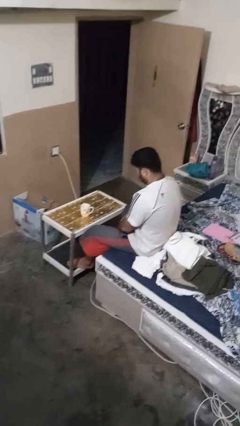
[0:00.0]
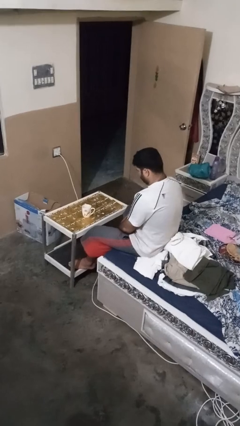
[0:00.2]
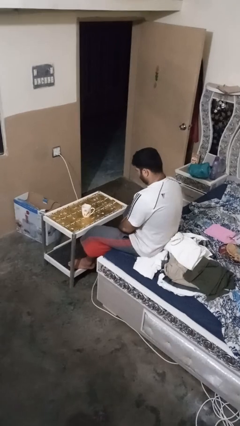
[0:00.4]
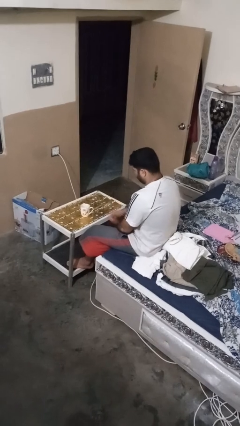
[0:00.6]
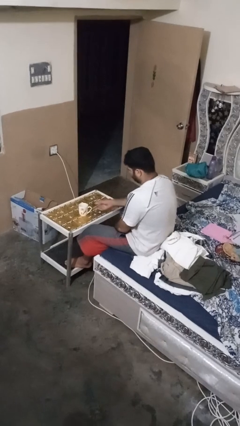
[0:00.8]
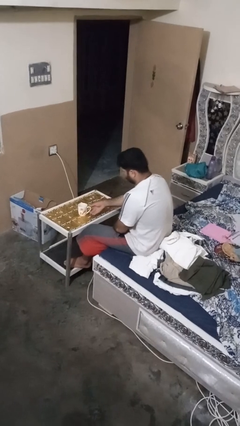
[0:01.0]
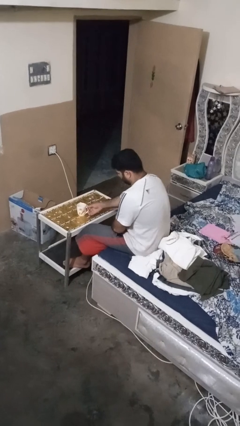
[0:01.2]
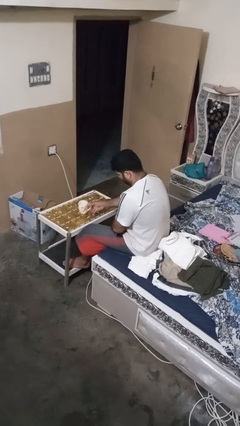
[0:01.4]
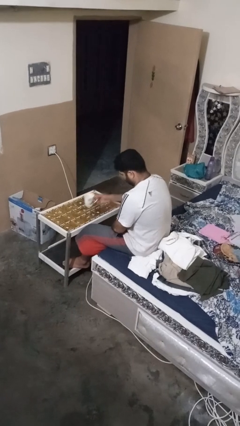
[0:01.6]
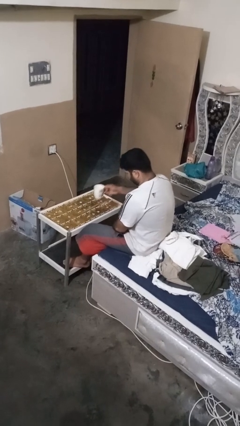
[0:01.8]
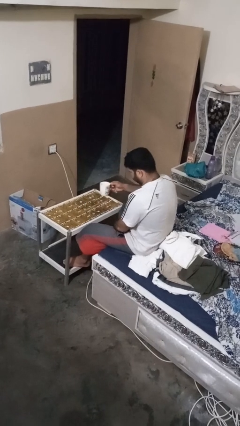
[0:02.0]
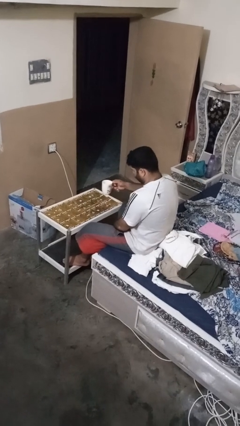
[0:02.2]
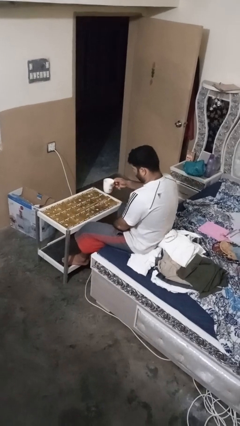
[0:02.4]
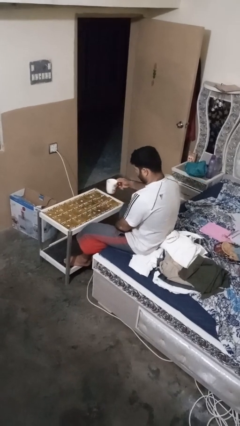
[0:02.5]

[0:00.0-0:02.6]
person picks up object from table

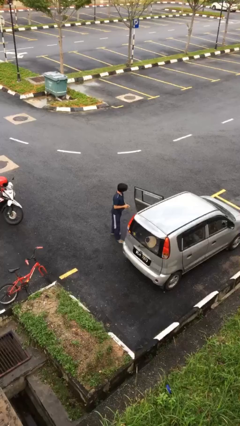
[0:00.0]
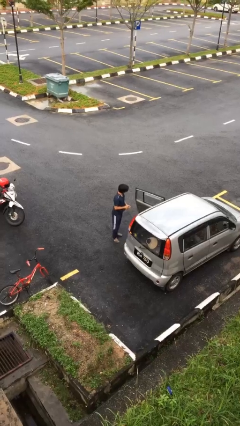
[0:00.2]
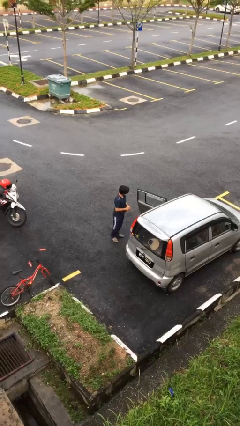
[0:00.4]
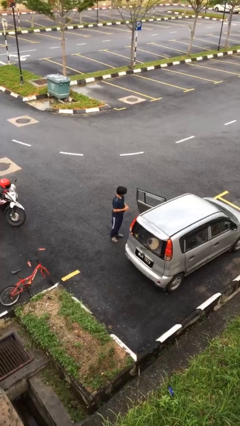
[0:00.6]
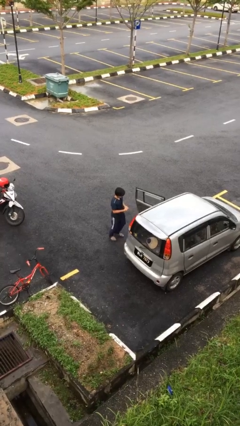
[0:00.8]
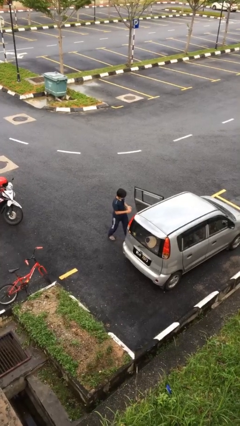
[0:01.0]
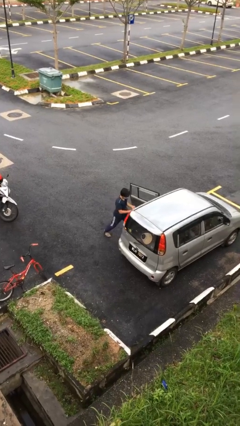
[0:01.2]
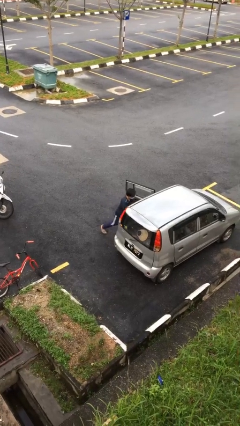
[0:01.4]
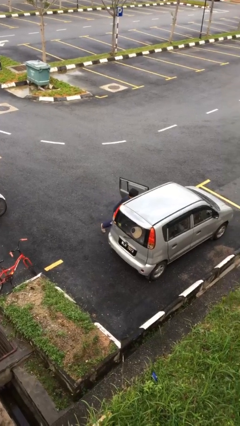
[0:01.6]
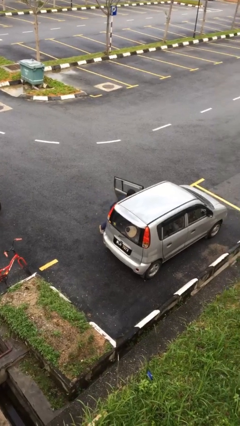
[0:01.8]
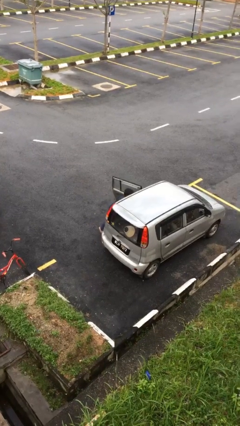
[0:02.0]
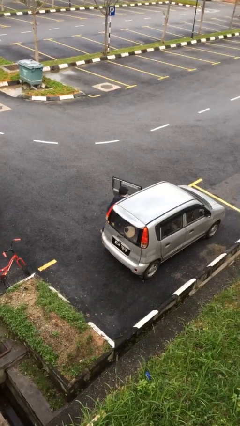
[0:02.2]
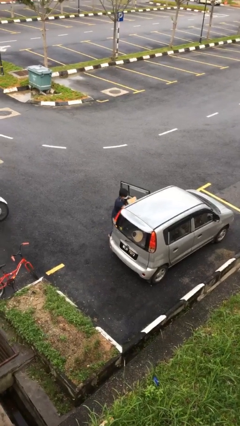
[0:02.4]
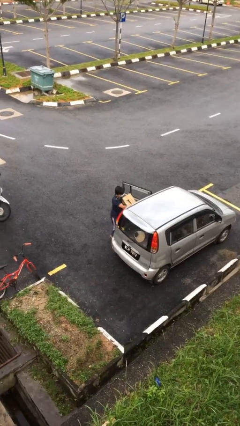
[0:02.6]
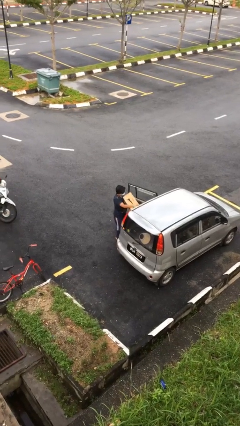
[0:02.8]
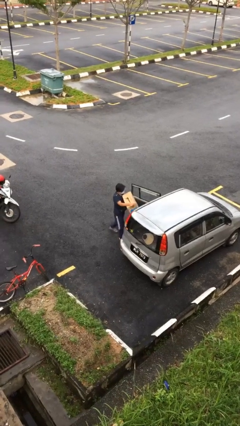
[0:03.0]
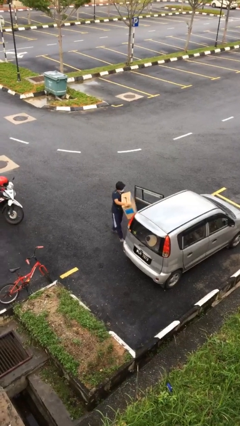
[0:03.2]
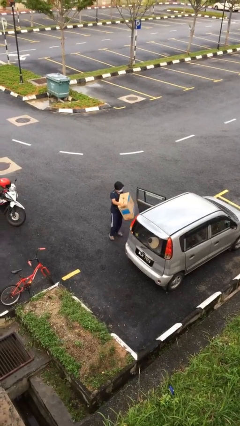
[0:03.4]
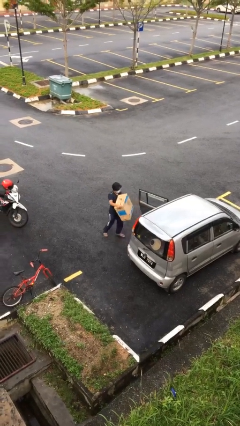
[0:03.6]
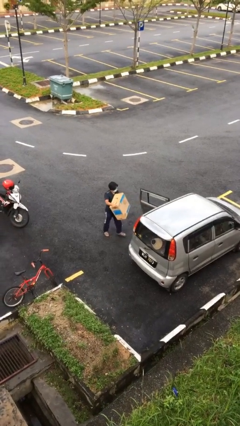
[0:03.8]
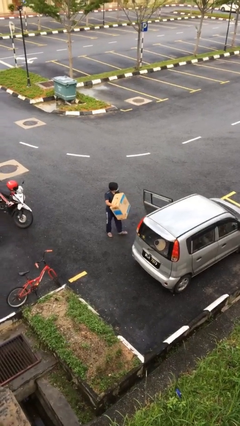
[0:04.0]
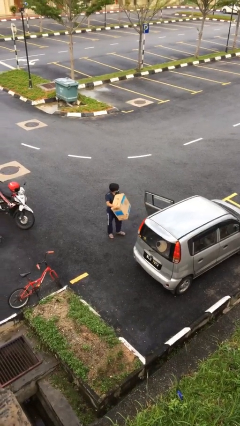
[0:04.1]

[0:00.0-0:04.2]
person unloads car

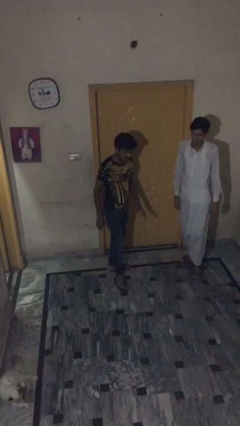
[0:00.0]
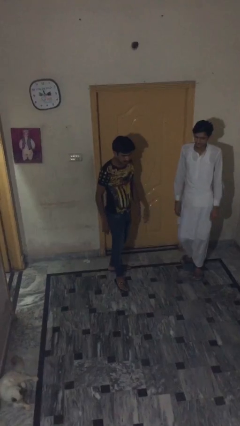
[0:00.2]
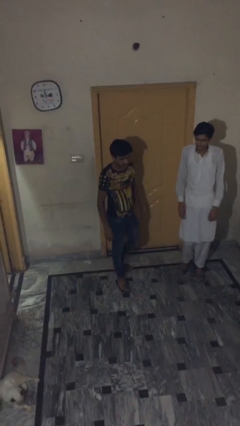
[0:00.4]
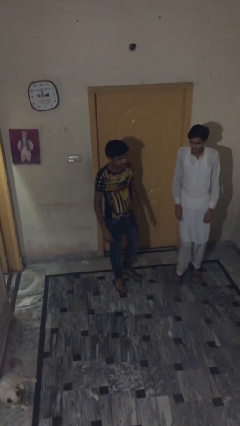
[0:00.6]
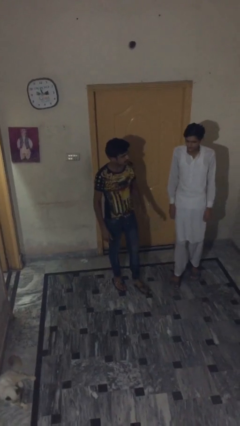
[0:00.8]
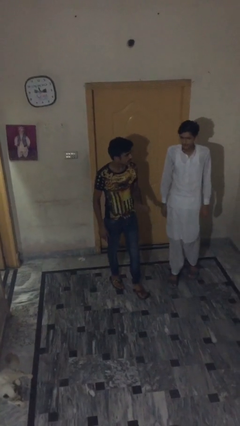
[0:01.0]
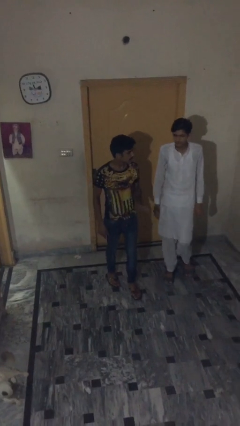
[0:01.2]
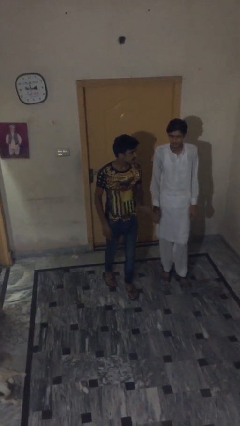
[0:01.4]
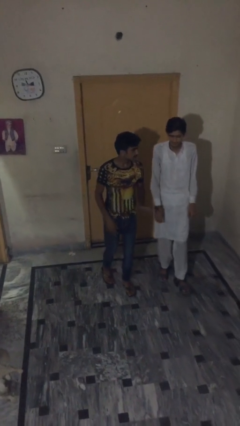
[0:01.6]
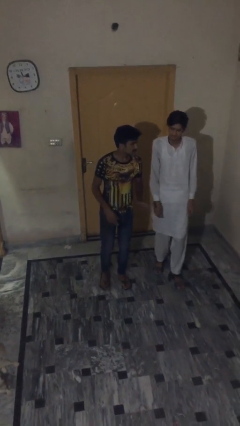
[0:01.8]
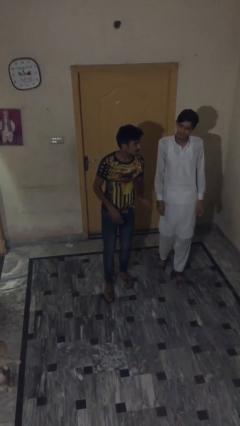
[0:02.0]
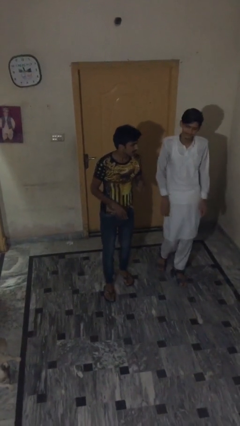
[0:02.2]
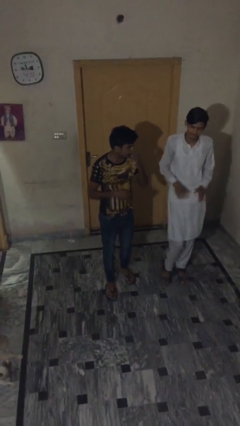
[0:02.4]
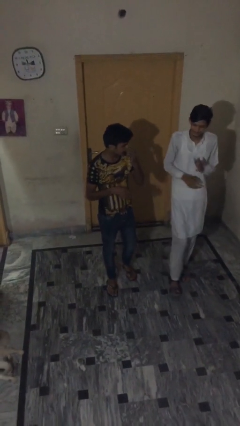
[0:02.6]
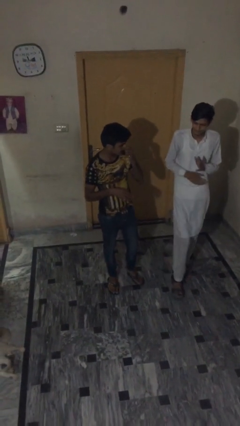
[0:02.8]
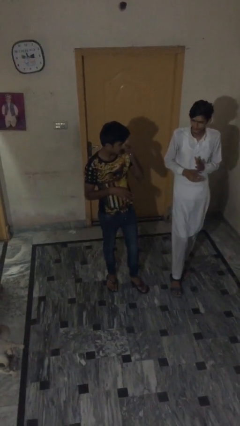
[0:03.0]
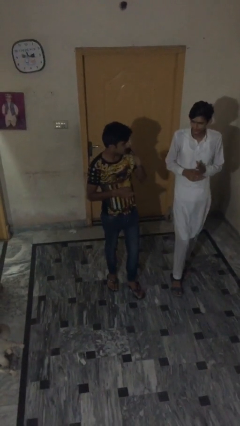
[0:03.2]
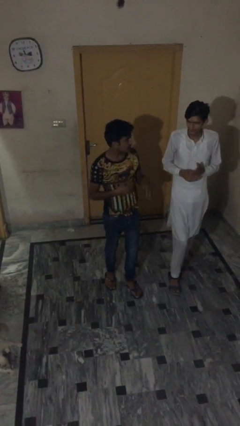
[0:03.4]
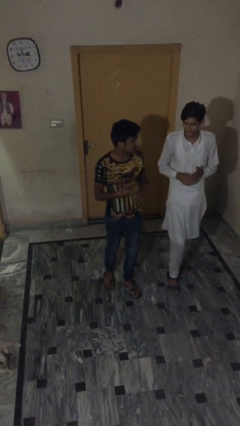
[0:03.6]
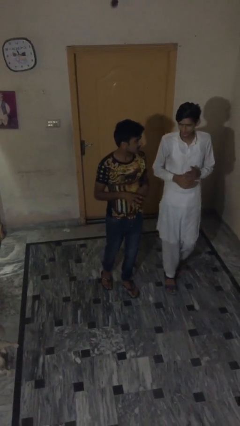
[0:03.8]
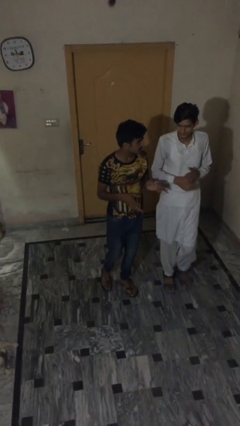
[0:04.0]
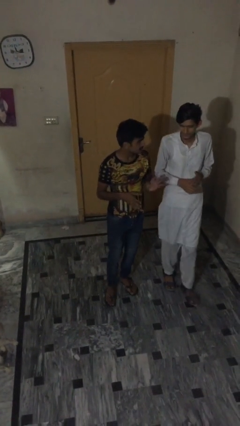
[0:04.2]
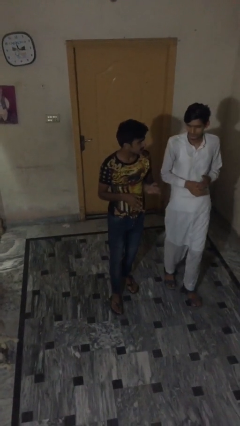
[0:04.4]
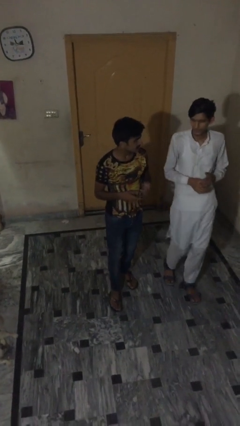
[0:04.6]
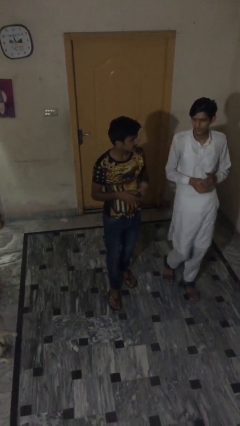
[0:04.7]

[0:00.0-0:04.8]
person talks to person

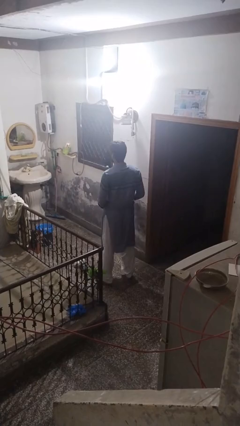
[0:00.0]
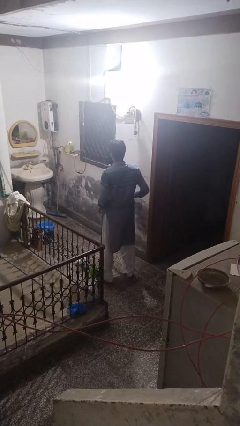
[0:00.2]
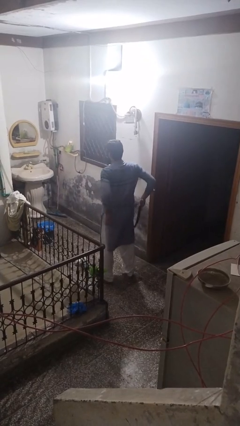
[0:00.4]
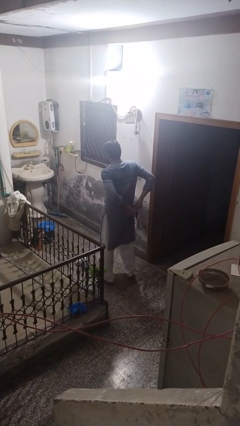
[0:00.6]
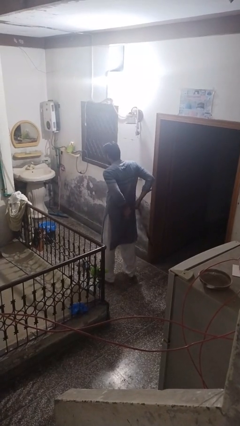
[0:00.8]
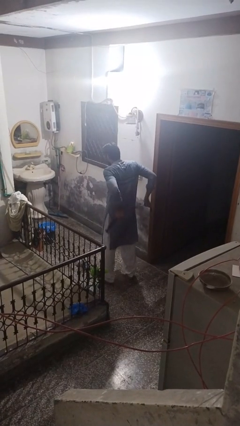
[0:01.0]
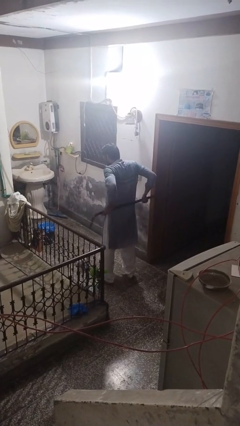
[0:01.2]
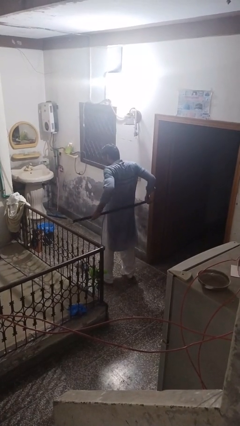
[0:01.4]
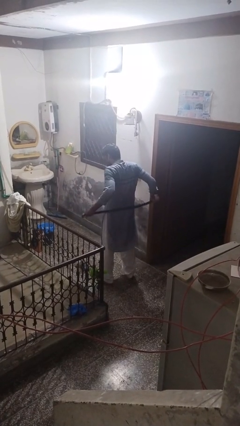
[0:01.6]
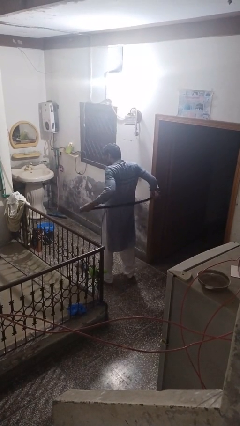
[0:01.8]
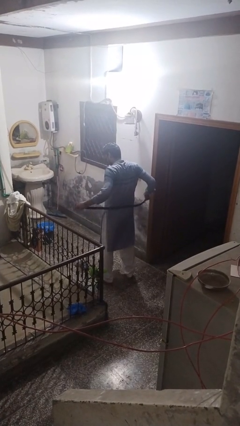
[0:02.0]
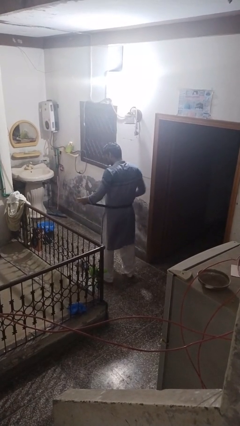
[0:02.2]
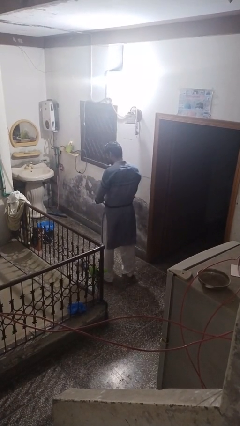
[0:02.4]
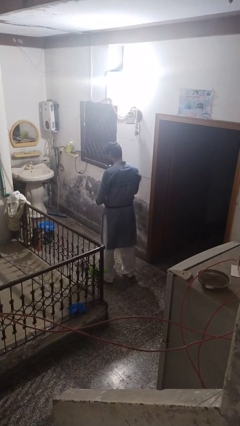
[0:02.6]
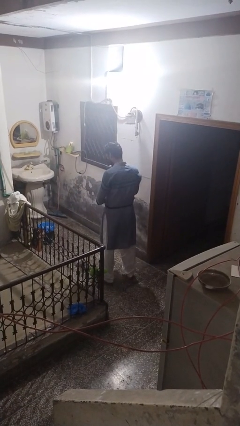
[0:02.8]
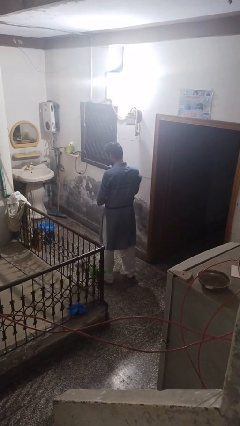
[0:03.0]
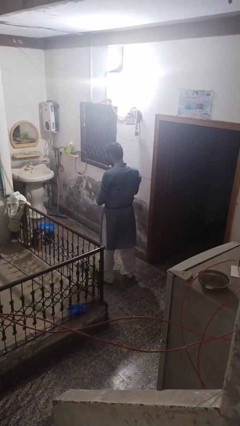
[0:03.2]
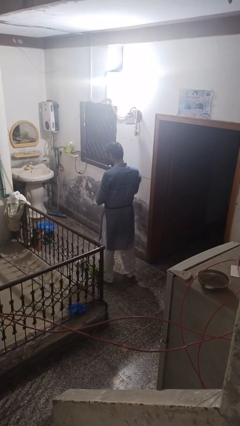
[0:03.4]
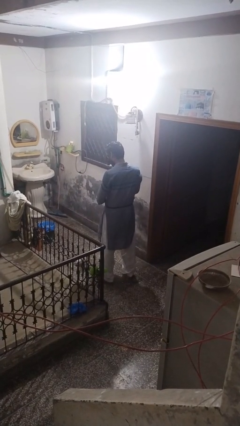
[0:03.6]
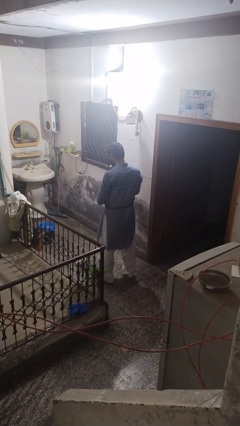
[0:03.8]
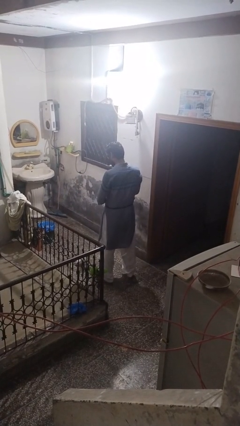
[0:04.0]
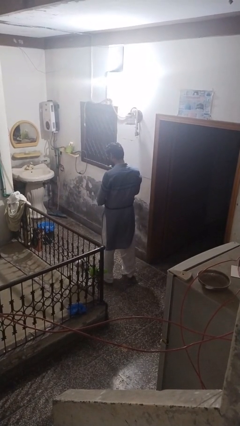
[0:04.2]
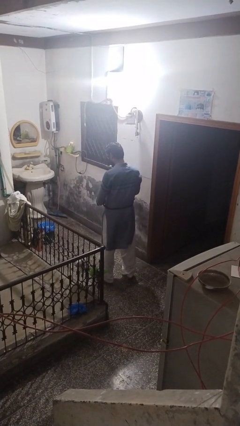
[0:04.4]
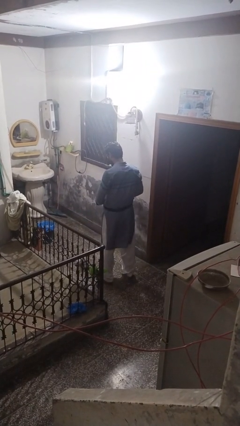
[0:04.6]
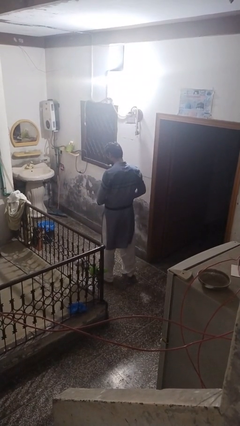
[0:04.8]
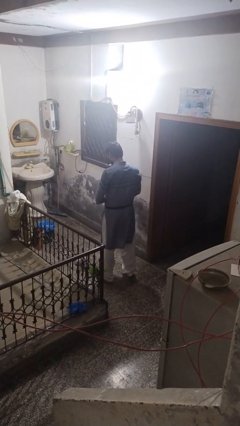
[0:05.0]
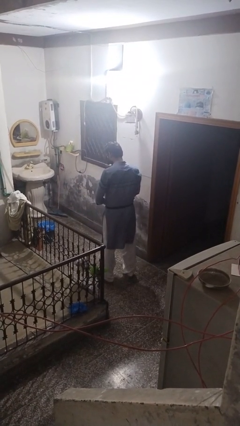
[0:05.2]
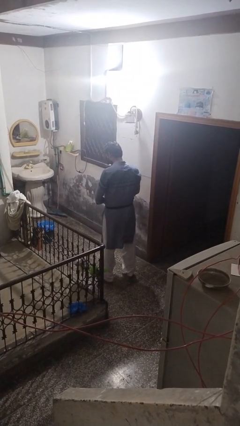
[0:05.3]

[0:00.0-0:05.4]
person puts on belt

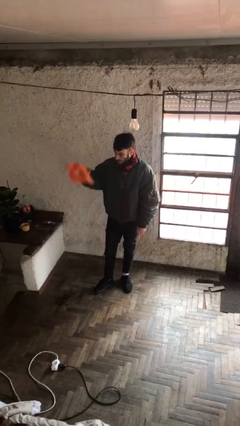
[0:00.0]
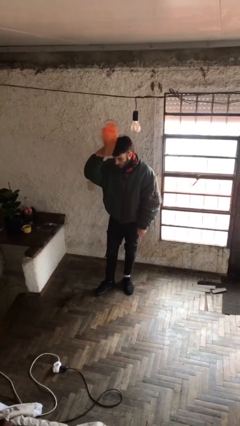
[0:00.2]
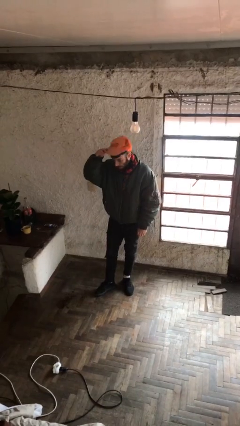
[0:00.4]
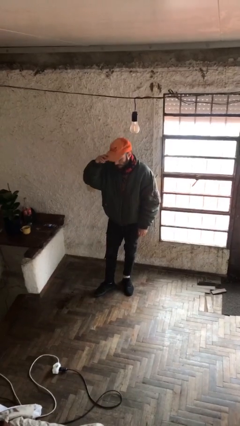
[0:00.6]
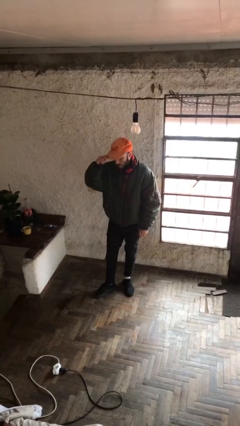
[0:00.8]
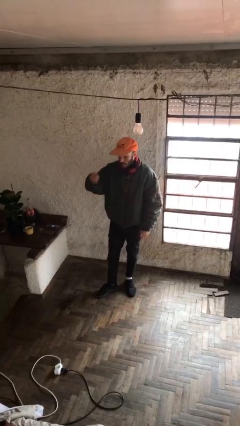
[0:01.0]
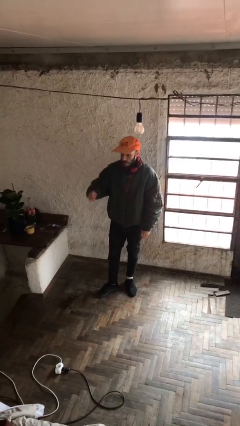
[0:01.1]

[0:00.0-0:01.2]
person puts on hat
